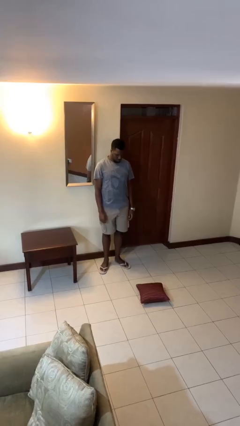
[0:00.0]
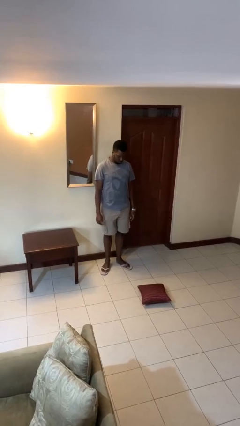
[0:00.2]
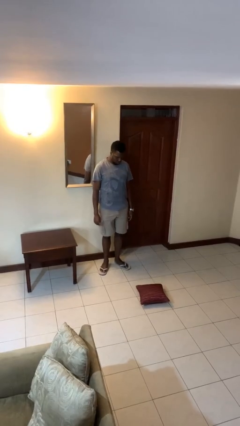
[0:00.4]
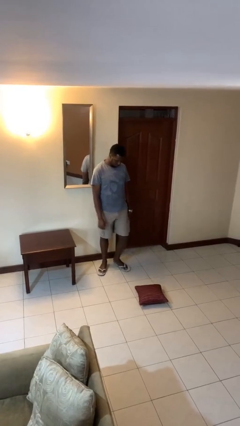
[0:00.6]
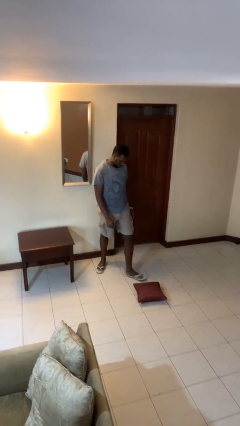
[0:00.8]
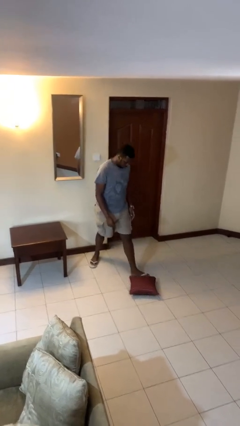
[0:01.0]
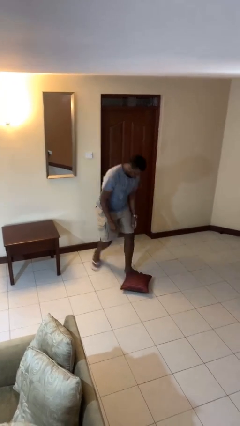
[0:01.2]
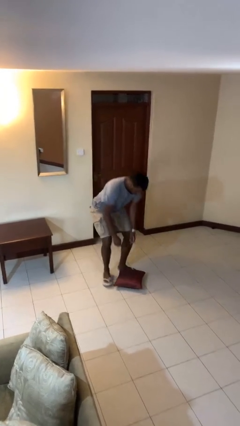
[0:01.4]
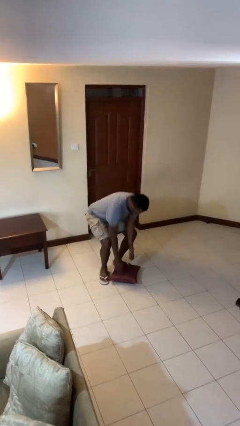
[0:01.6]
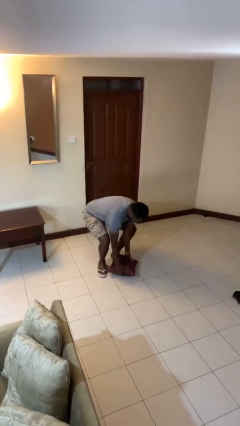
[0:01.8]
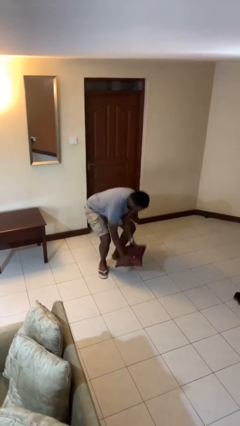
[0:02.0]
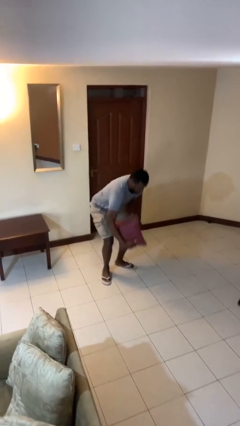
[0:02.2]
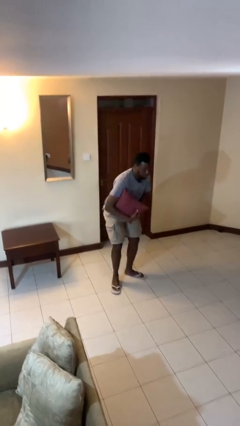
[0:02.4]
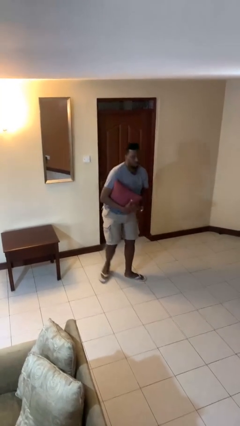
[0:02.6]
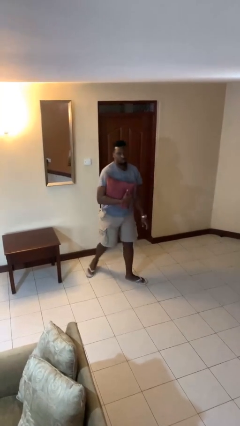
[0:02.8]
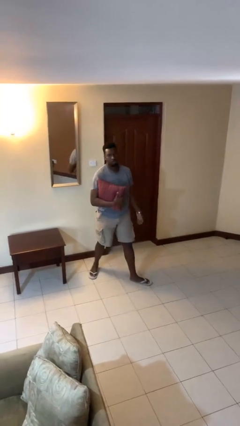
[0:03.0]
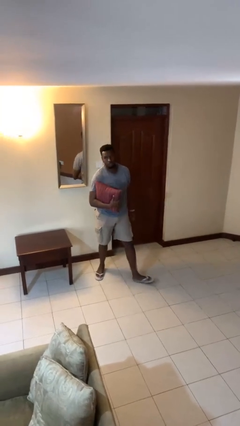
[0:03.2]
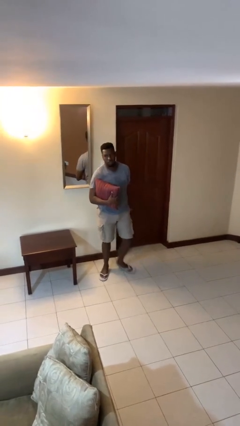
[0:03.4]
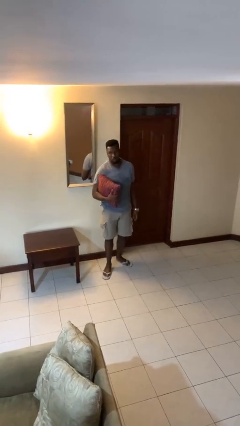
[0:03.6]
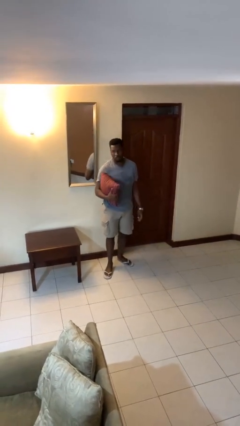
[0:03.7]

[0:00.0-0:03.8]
person picks up object from floor

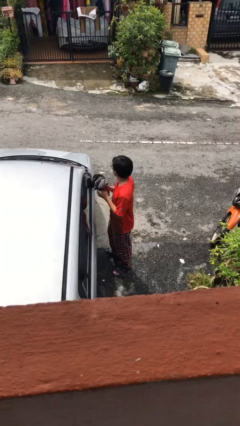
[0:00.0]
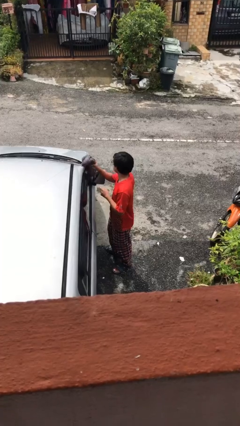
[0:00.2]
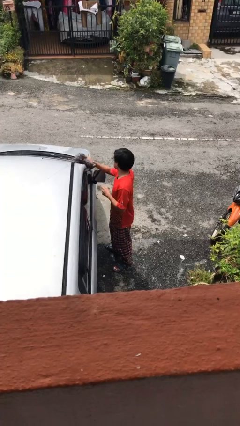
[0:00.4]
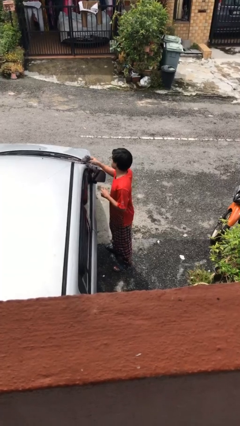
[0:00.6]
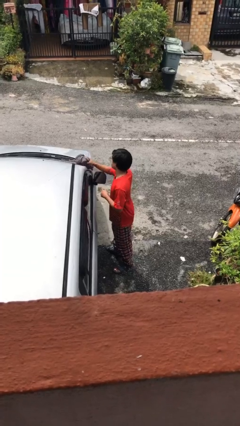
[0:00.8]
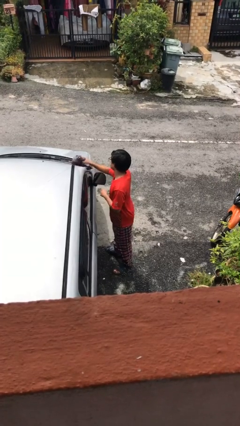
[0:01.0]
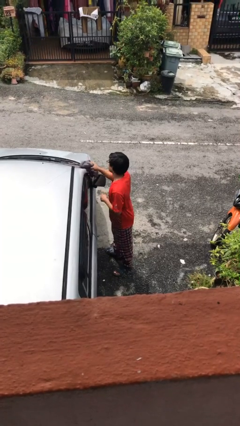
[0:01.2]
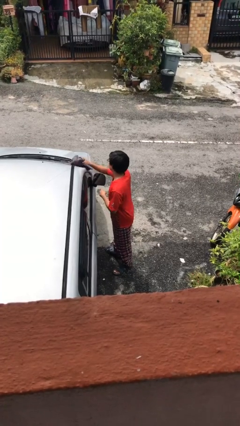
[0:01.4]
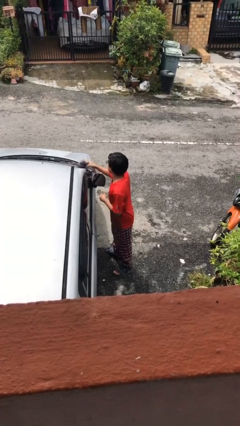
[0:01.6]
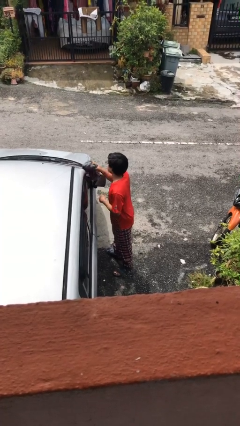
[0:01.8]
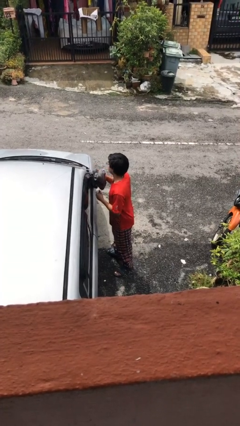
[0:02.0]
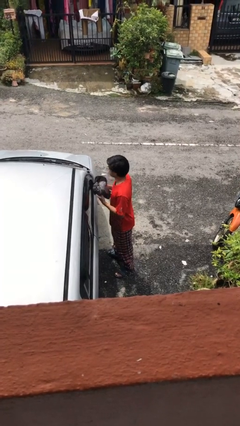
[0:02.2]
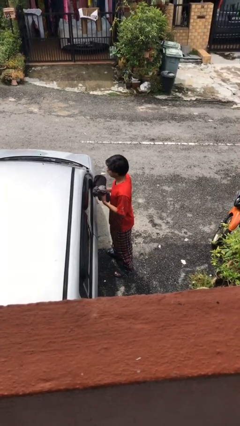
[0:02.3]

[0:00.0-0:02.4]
person polishes car with rag

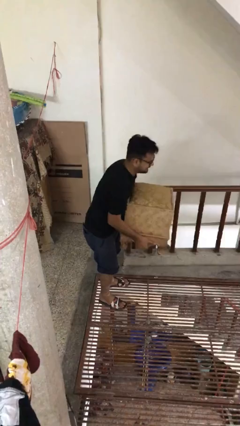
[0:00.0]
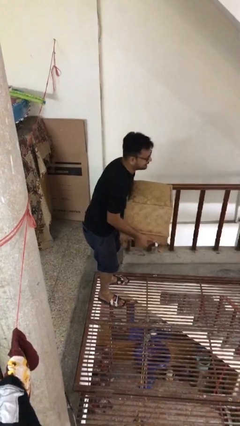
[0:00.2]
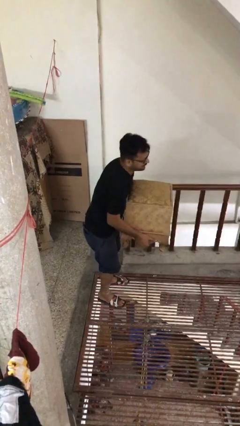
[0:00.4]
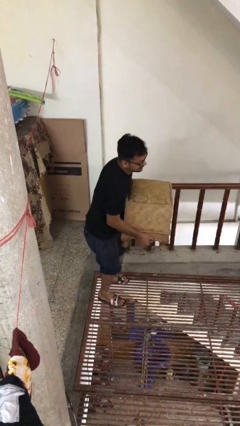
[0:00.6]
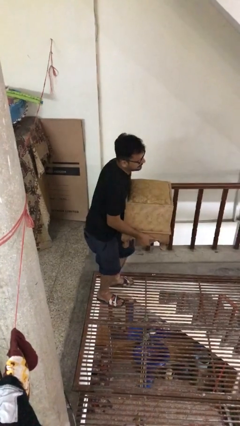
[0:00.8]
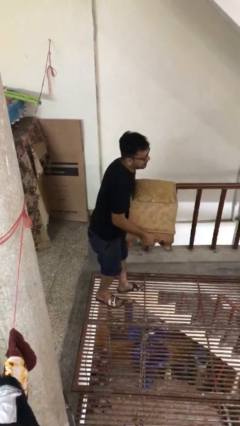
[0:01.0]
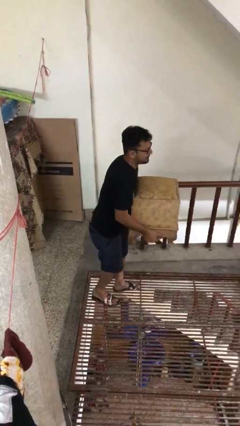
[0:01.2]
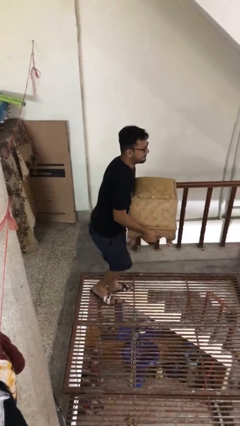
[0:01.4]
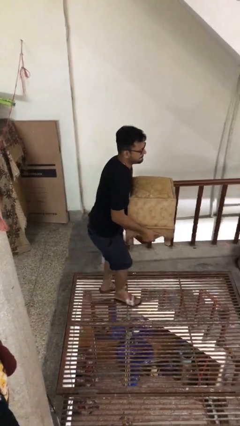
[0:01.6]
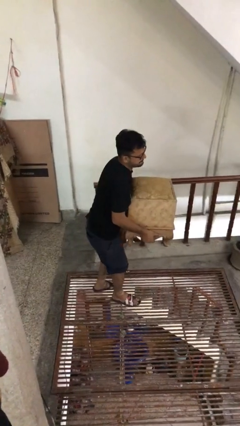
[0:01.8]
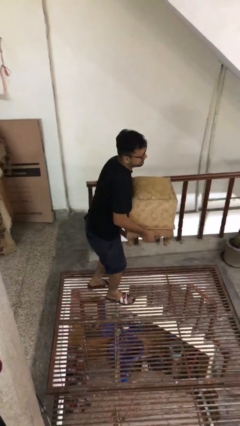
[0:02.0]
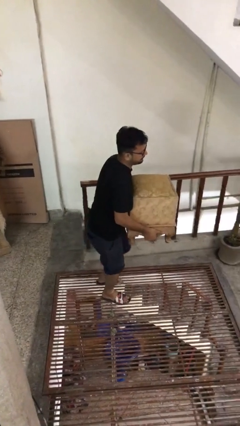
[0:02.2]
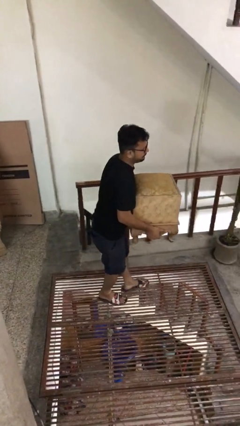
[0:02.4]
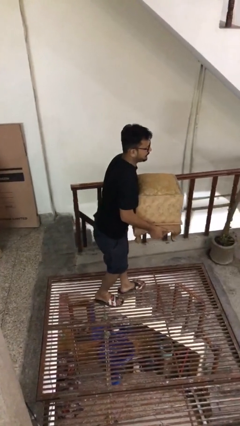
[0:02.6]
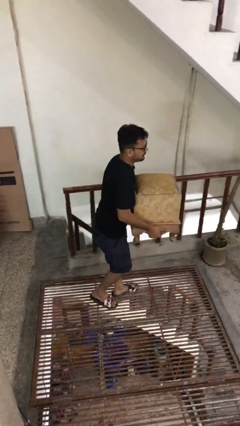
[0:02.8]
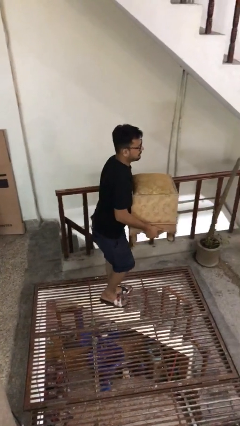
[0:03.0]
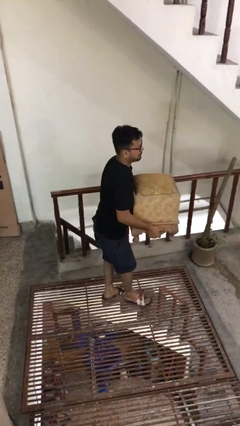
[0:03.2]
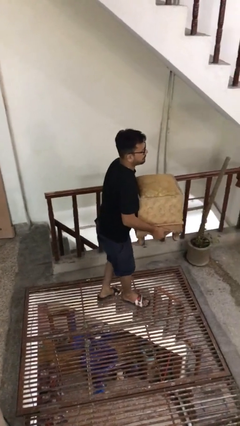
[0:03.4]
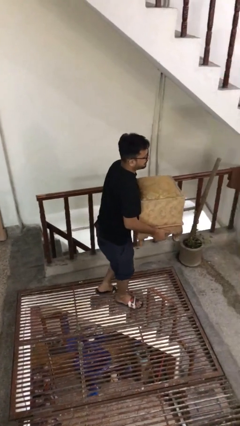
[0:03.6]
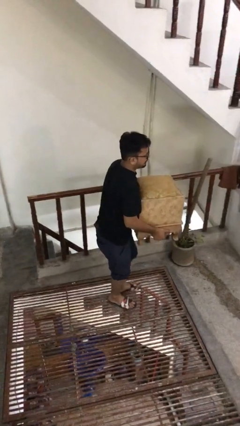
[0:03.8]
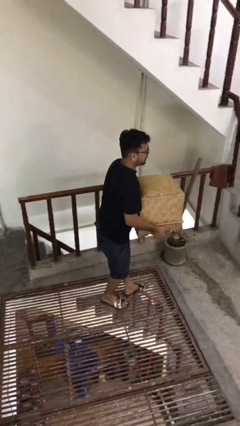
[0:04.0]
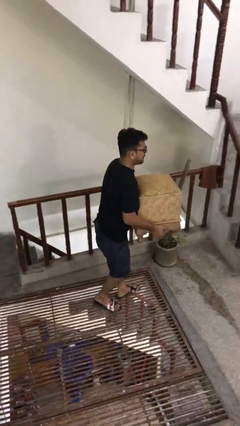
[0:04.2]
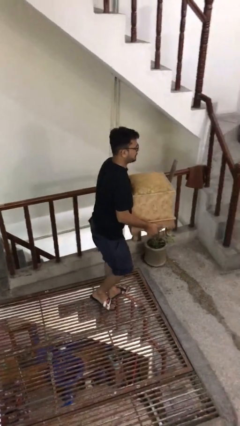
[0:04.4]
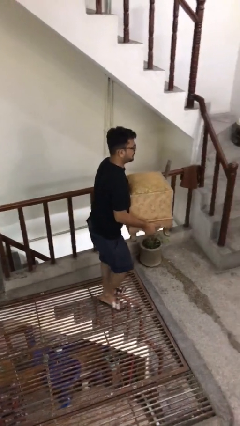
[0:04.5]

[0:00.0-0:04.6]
person carries heavy object

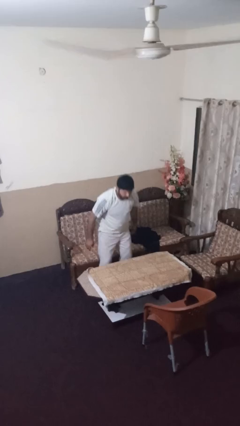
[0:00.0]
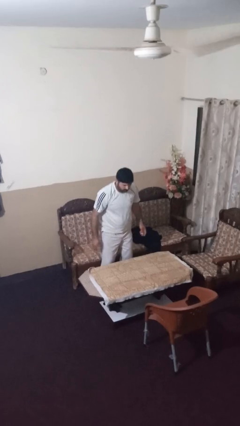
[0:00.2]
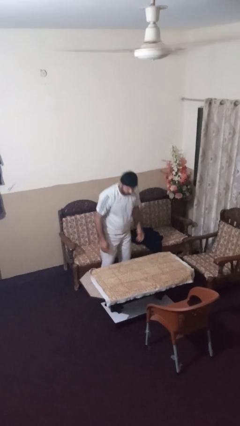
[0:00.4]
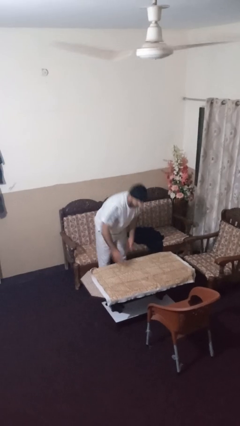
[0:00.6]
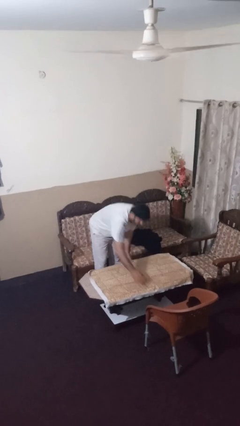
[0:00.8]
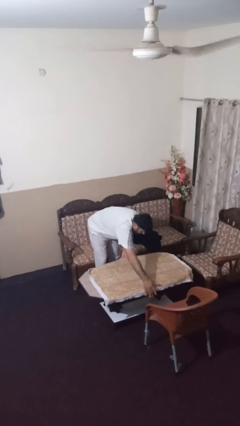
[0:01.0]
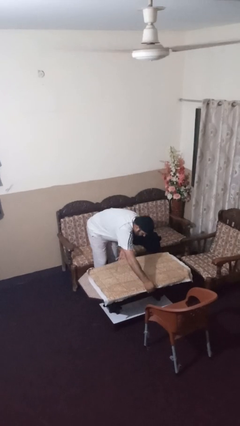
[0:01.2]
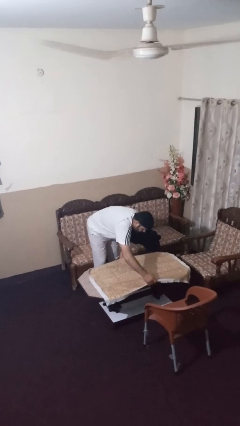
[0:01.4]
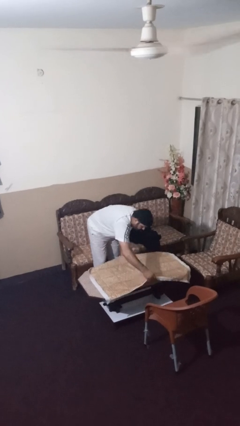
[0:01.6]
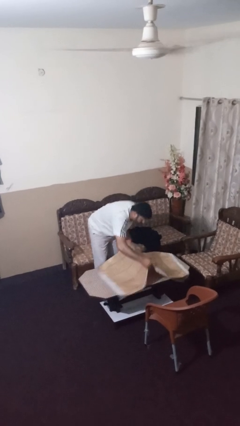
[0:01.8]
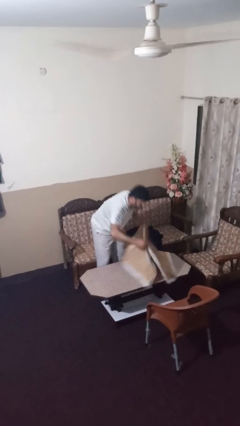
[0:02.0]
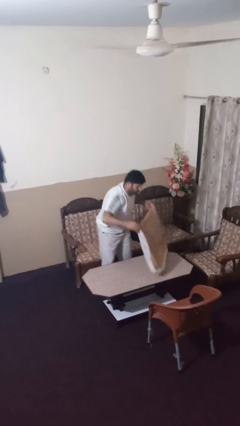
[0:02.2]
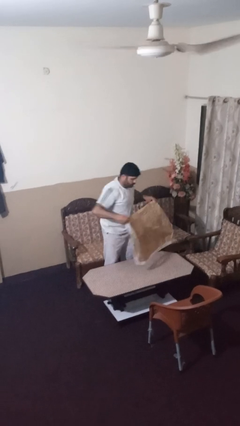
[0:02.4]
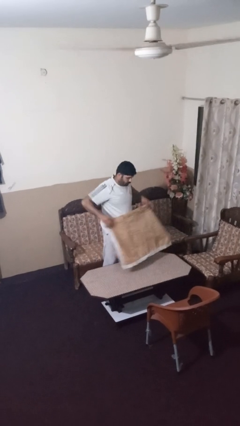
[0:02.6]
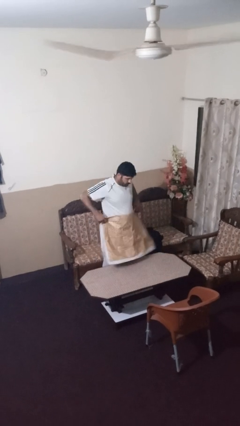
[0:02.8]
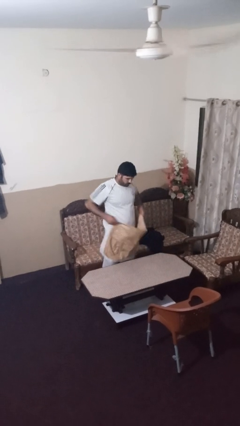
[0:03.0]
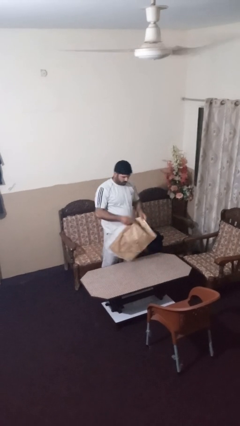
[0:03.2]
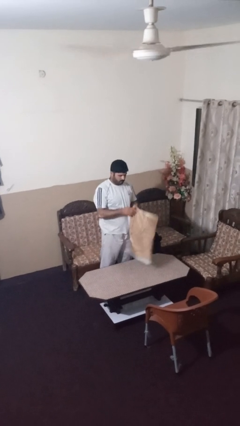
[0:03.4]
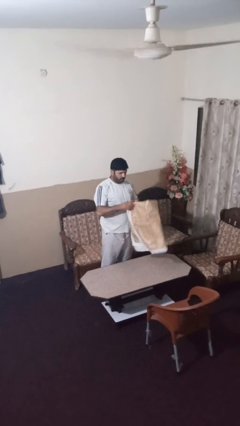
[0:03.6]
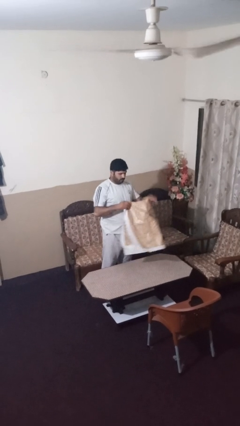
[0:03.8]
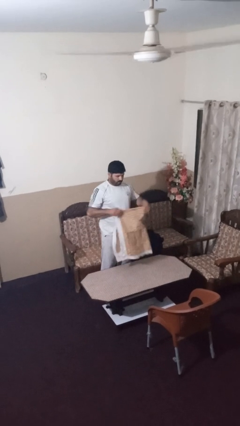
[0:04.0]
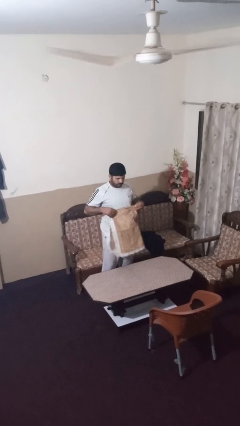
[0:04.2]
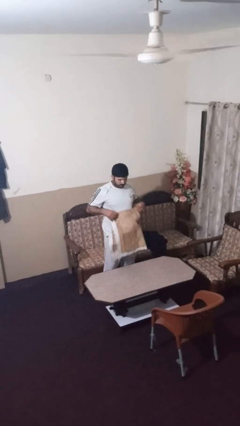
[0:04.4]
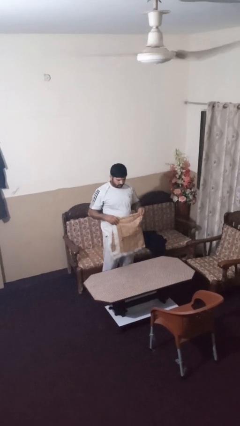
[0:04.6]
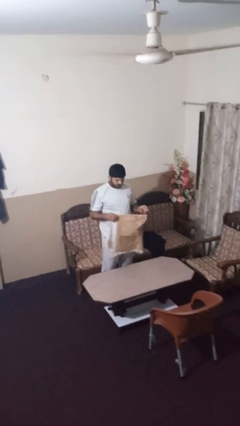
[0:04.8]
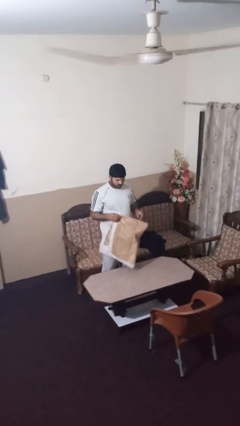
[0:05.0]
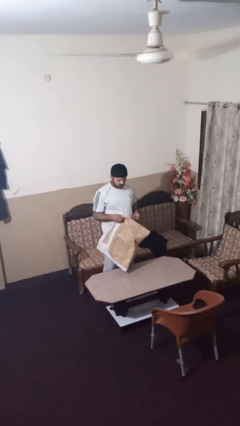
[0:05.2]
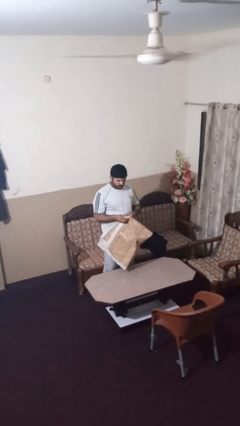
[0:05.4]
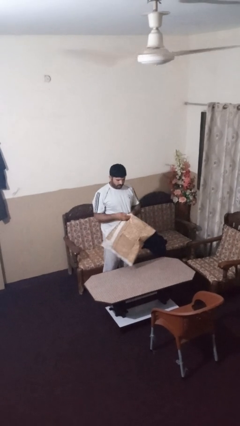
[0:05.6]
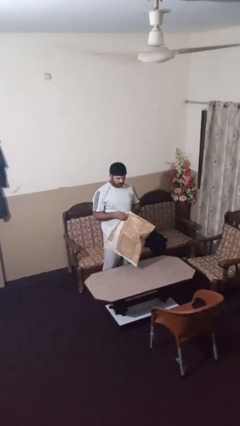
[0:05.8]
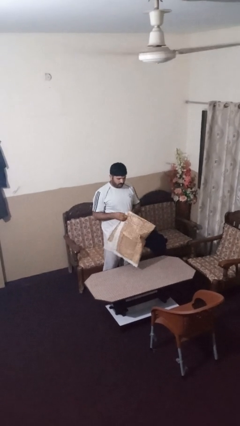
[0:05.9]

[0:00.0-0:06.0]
person folds tablecloth

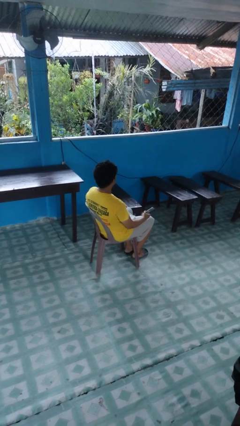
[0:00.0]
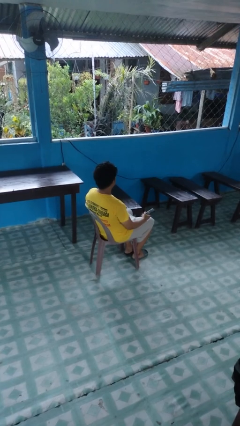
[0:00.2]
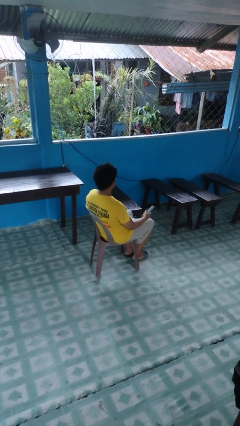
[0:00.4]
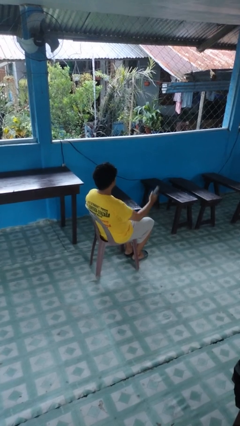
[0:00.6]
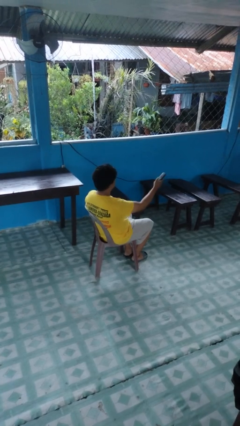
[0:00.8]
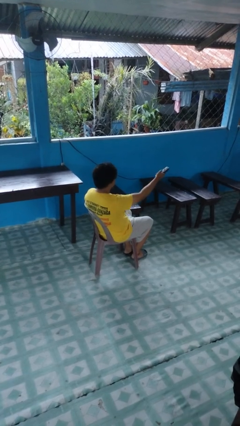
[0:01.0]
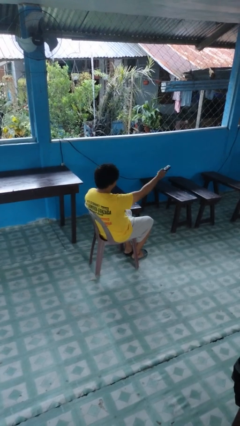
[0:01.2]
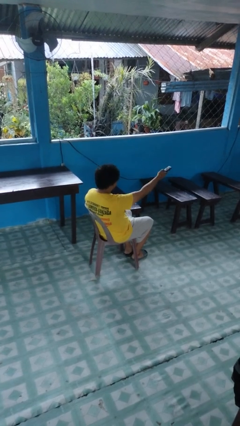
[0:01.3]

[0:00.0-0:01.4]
person uses television remote
